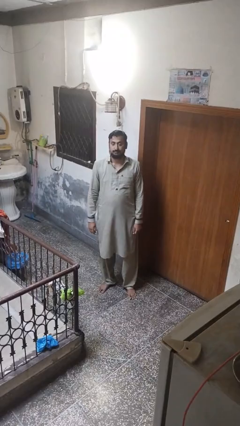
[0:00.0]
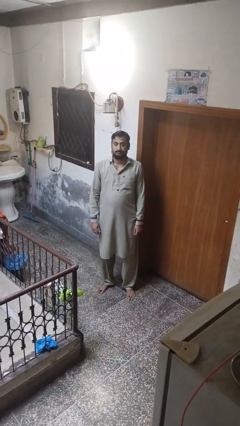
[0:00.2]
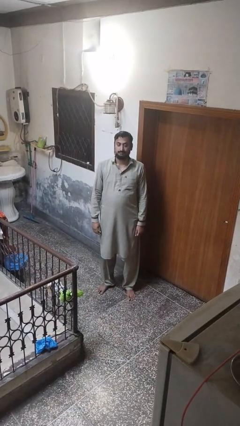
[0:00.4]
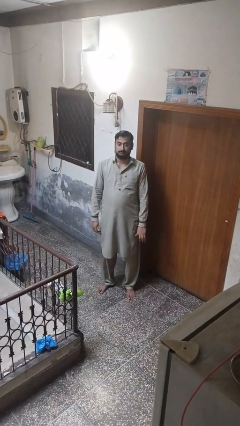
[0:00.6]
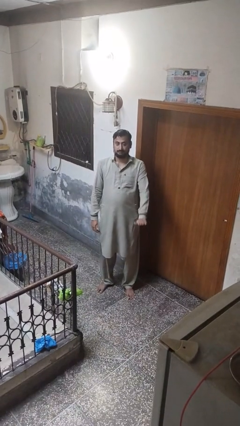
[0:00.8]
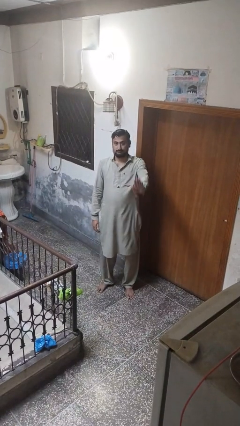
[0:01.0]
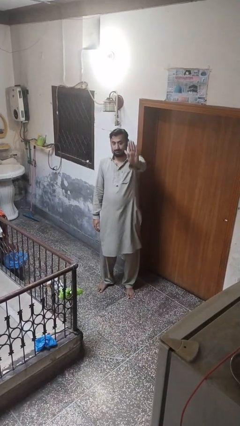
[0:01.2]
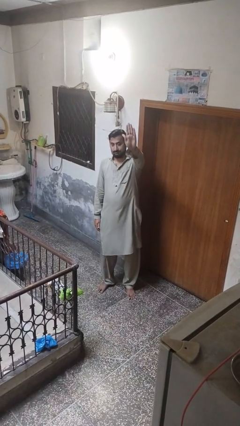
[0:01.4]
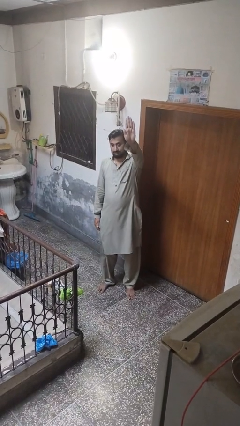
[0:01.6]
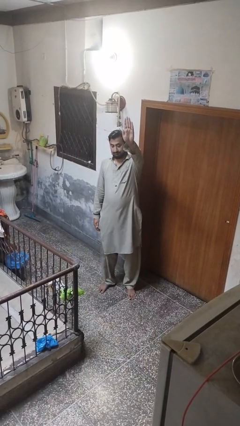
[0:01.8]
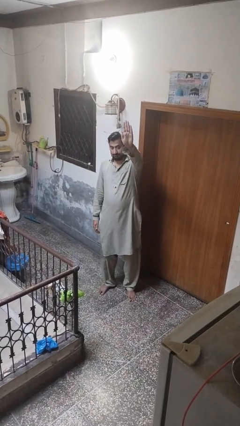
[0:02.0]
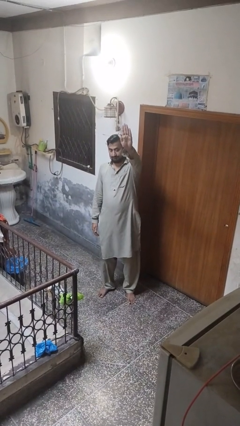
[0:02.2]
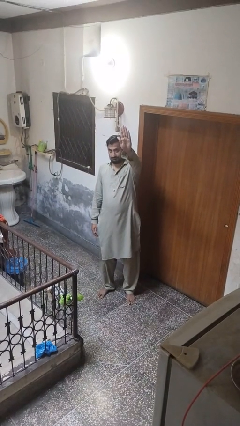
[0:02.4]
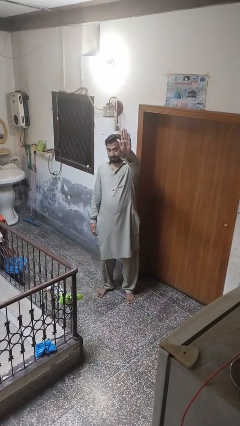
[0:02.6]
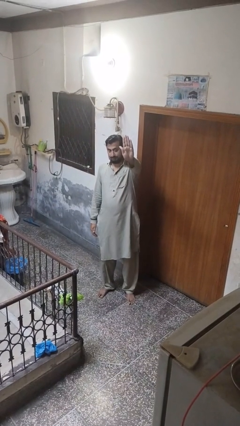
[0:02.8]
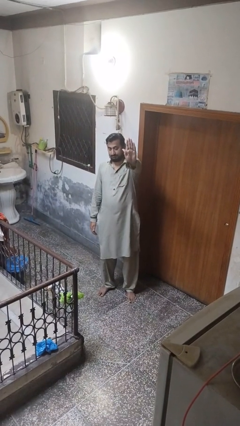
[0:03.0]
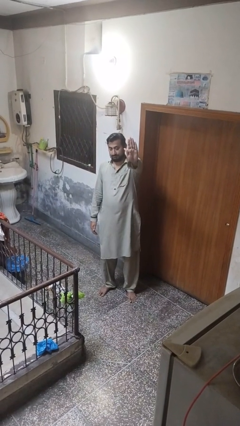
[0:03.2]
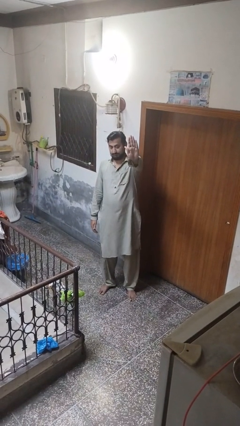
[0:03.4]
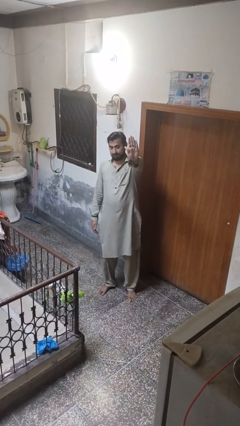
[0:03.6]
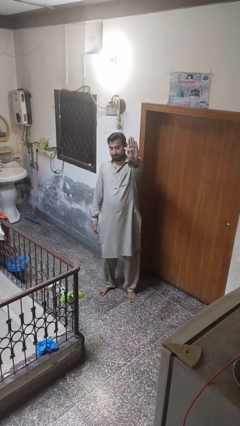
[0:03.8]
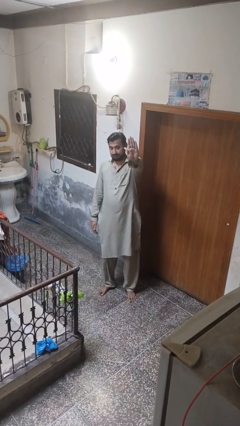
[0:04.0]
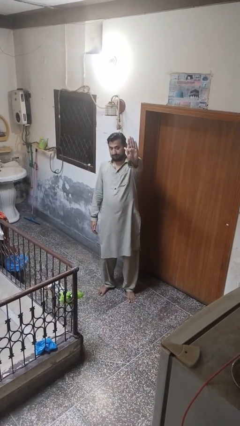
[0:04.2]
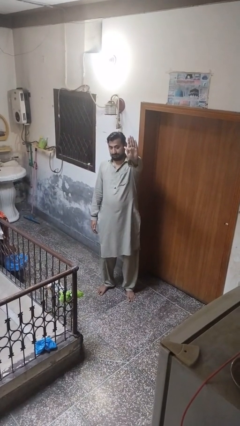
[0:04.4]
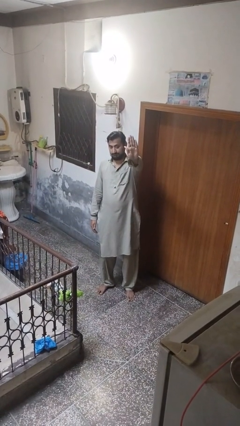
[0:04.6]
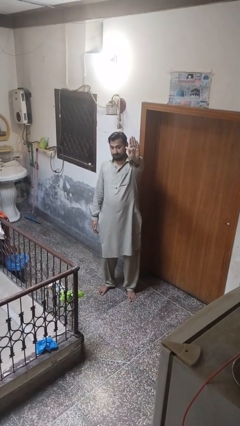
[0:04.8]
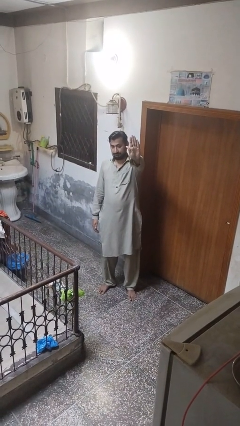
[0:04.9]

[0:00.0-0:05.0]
person gestures stop

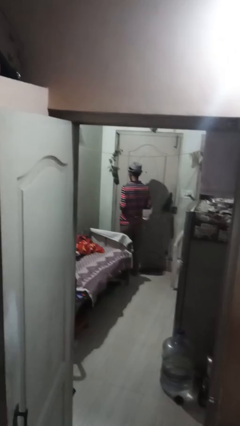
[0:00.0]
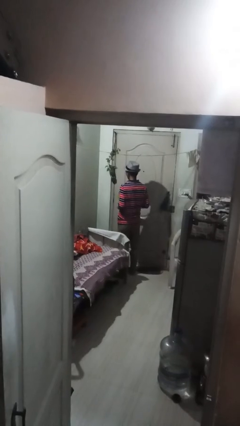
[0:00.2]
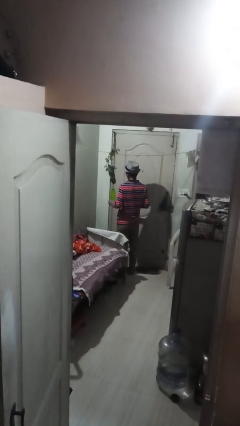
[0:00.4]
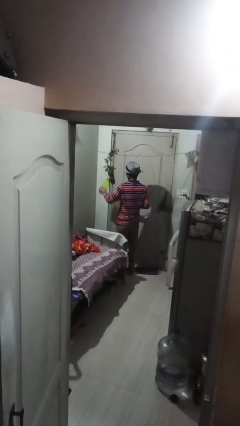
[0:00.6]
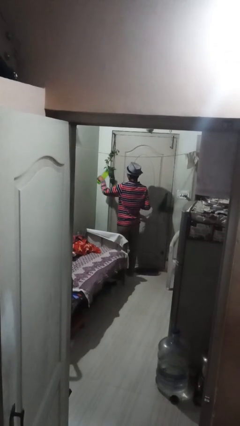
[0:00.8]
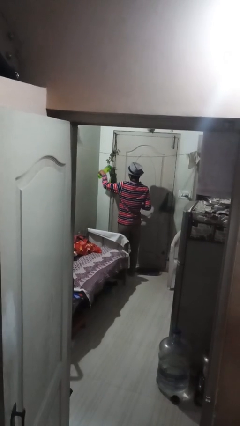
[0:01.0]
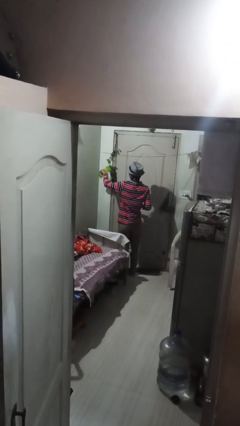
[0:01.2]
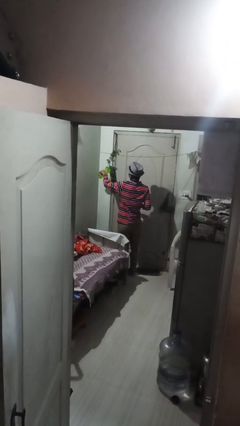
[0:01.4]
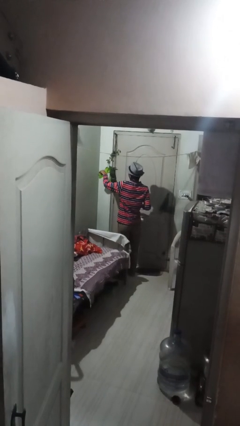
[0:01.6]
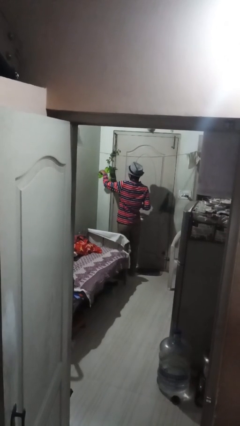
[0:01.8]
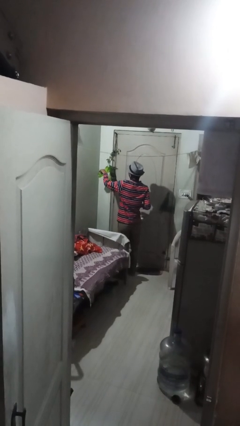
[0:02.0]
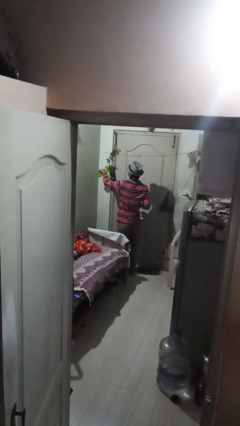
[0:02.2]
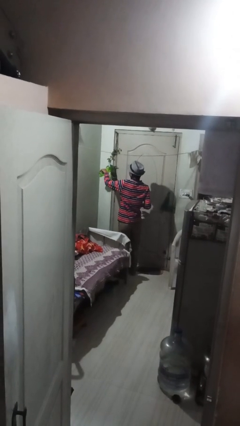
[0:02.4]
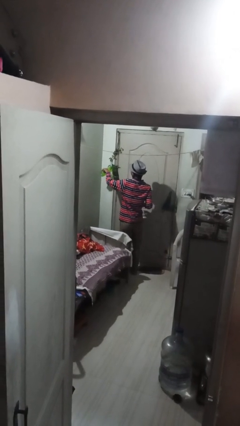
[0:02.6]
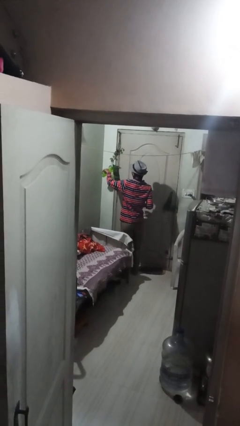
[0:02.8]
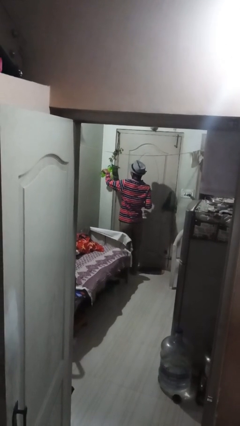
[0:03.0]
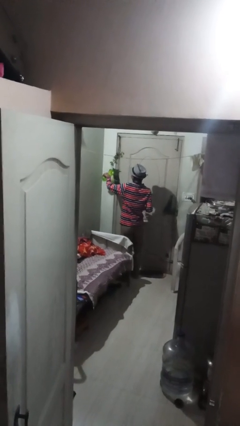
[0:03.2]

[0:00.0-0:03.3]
person waters houseplant

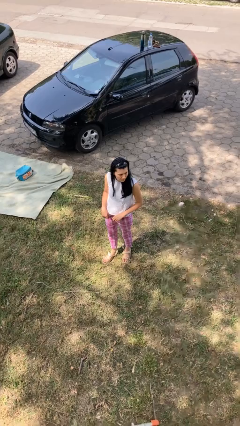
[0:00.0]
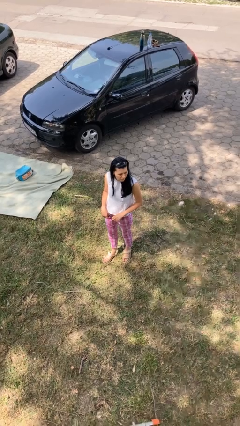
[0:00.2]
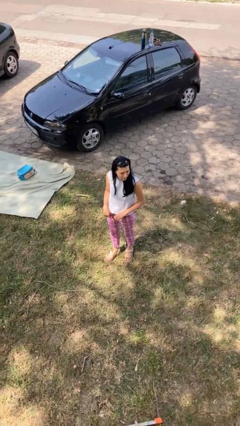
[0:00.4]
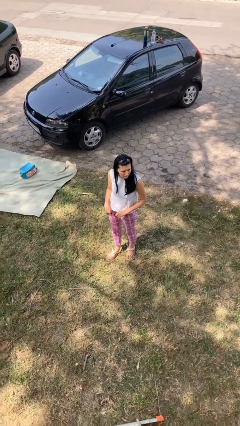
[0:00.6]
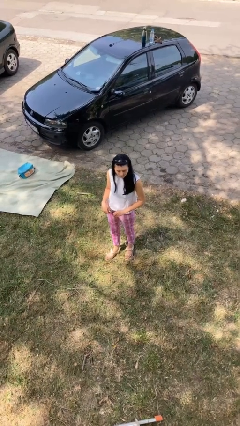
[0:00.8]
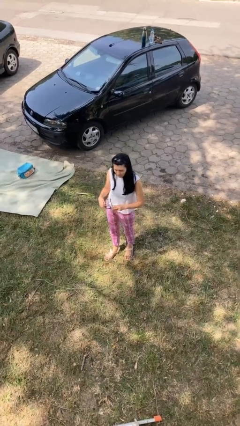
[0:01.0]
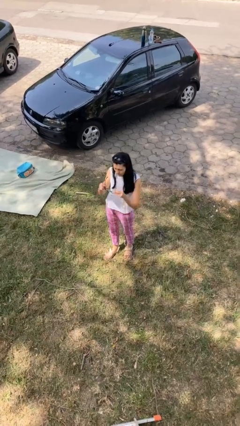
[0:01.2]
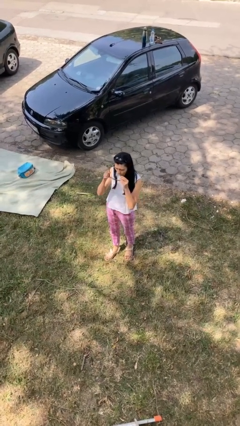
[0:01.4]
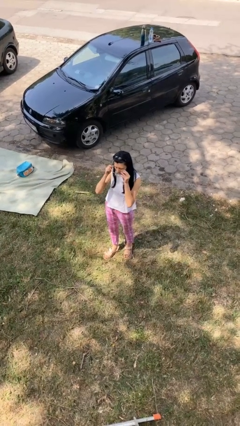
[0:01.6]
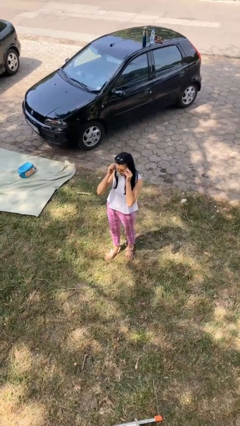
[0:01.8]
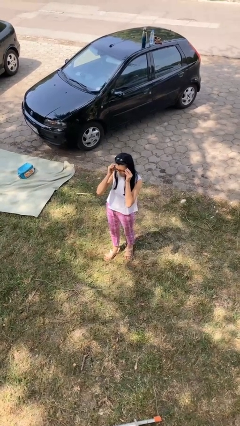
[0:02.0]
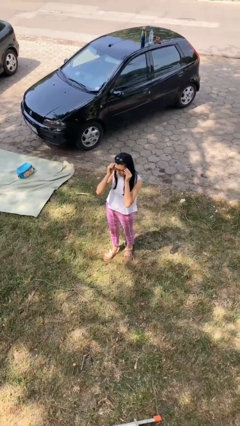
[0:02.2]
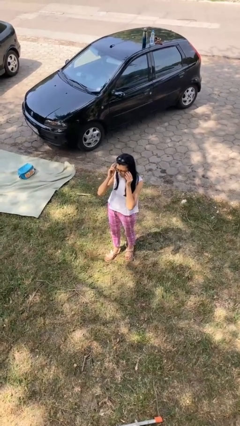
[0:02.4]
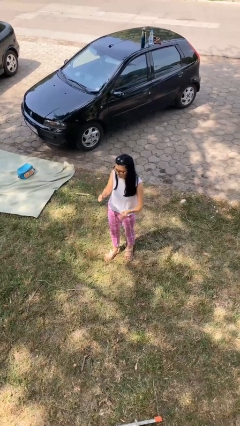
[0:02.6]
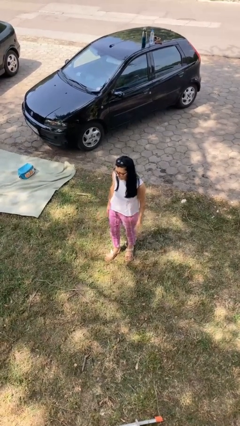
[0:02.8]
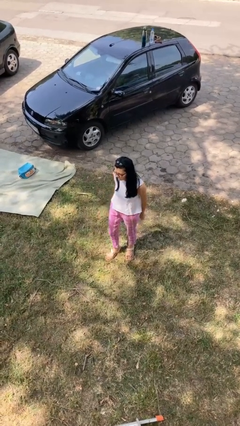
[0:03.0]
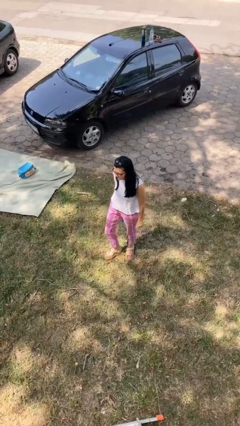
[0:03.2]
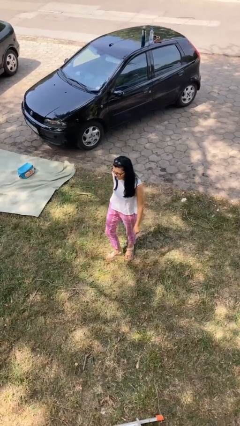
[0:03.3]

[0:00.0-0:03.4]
person puts on glasses

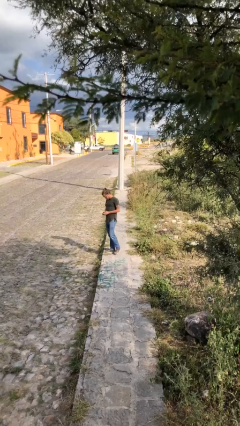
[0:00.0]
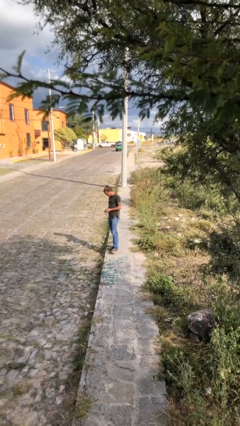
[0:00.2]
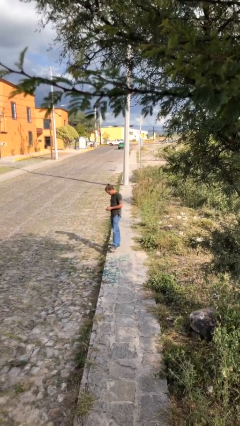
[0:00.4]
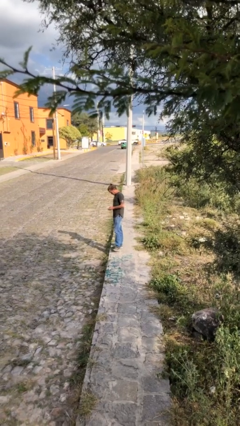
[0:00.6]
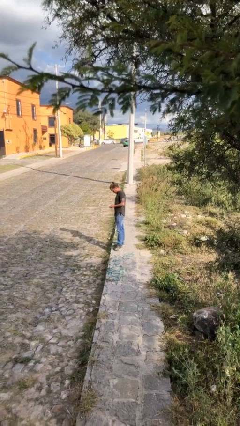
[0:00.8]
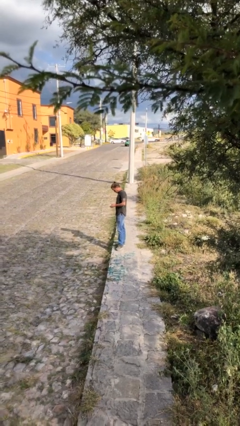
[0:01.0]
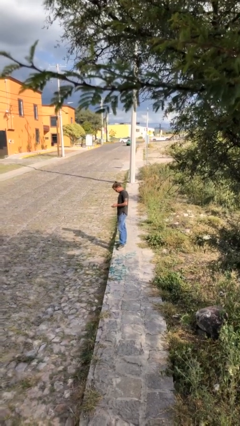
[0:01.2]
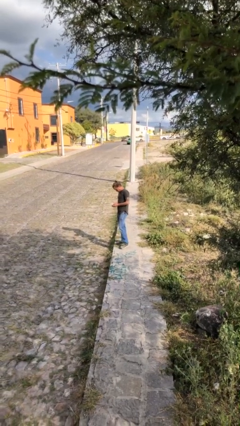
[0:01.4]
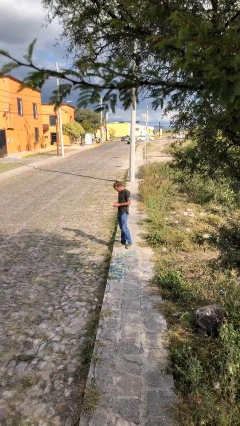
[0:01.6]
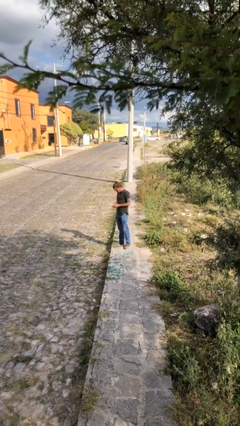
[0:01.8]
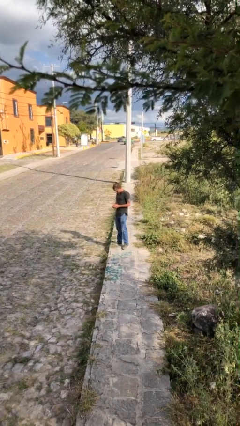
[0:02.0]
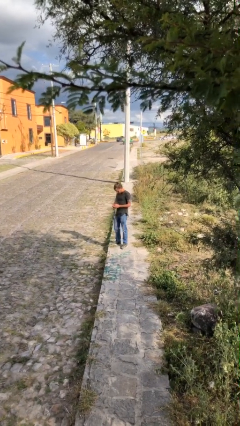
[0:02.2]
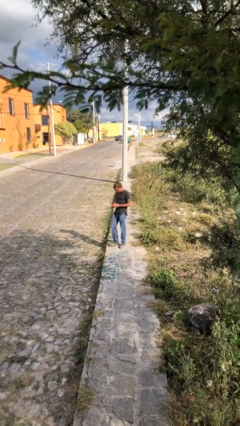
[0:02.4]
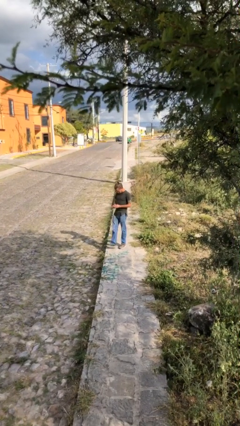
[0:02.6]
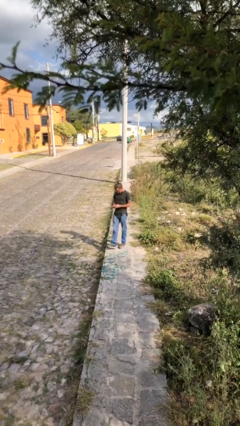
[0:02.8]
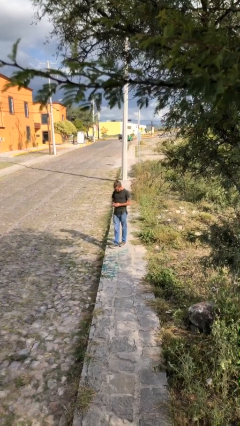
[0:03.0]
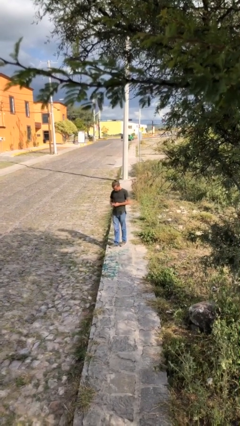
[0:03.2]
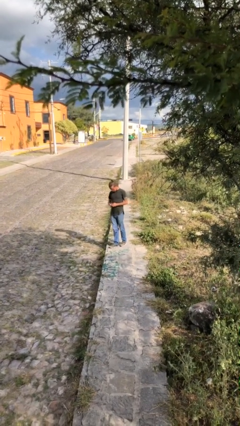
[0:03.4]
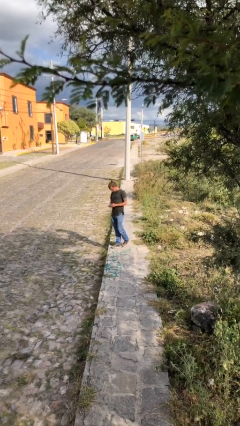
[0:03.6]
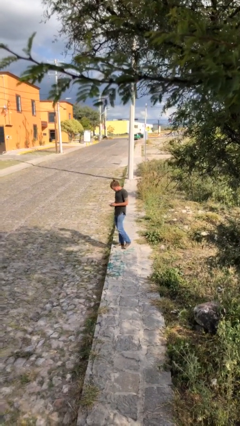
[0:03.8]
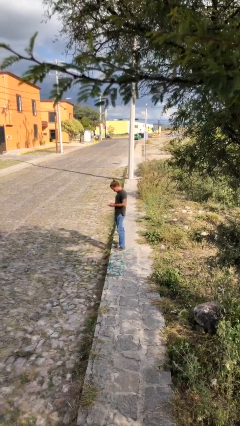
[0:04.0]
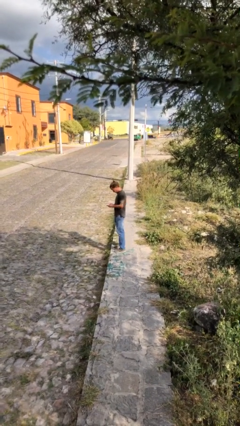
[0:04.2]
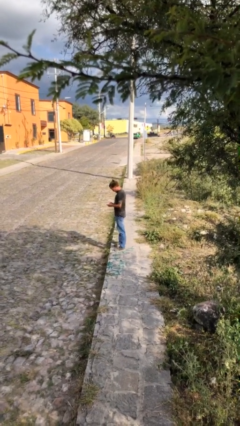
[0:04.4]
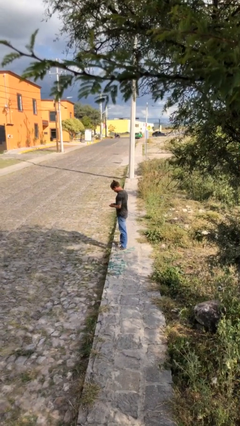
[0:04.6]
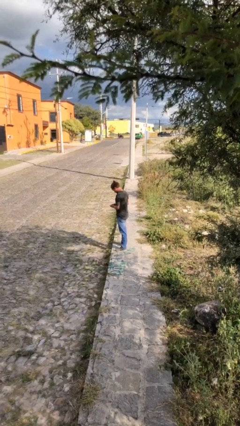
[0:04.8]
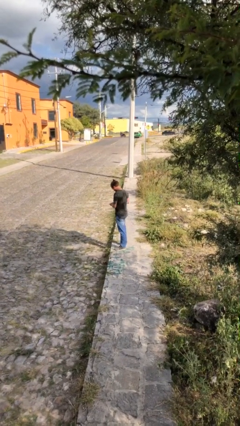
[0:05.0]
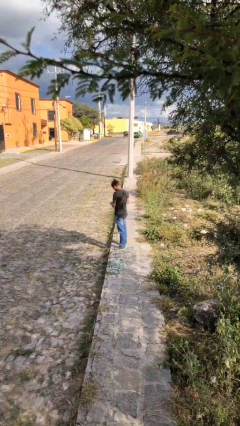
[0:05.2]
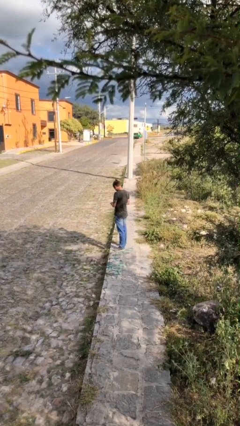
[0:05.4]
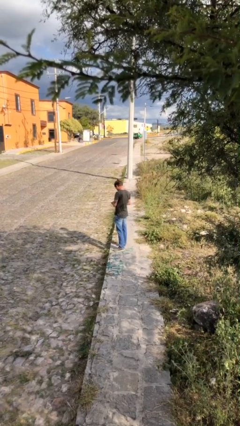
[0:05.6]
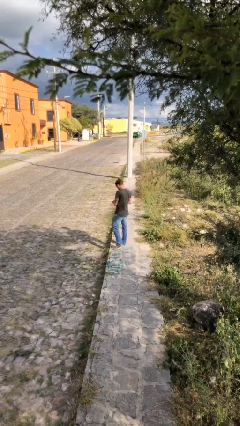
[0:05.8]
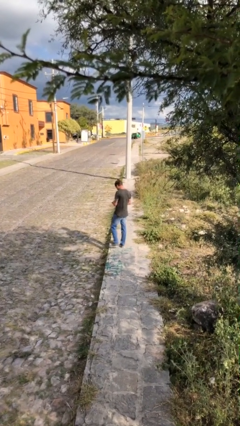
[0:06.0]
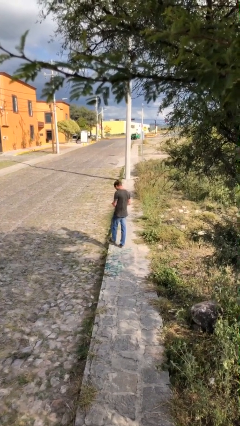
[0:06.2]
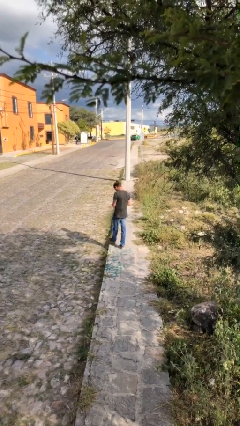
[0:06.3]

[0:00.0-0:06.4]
person texts on phone
